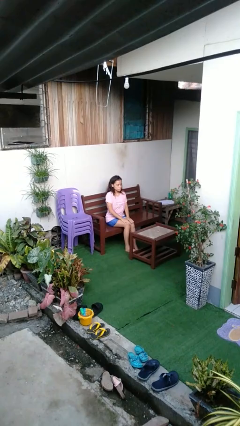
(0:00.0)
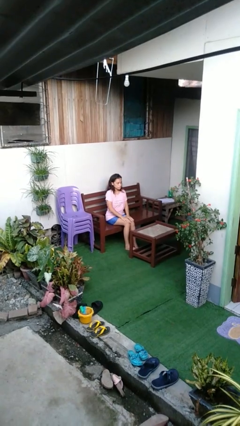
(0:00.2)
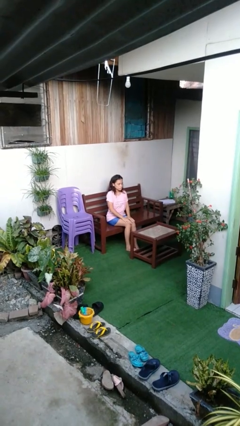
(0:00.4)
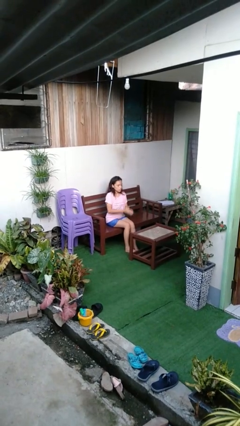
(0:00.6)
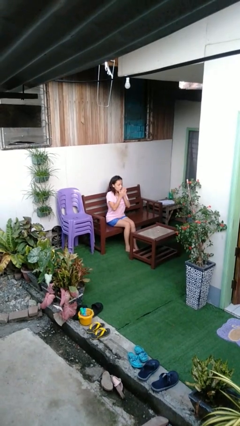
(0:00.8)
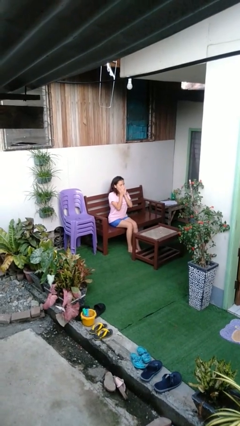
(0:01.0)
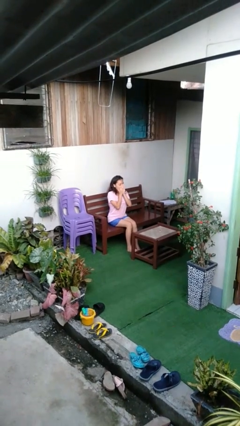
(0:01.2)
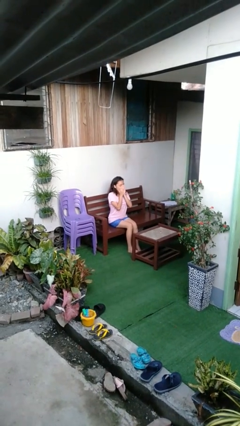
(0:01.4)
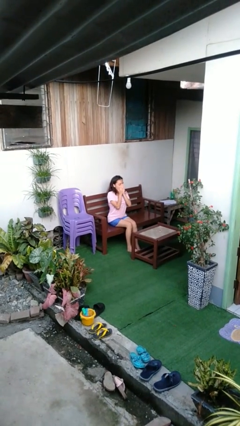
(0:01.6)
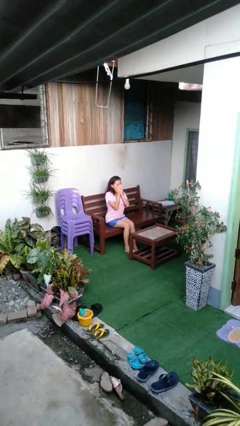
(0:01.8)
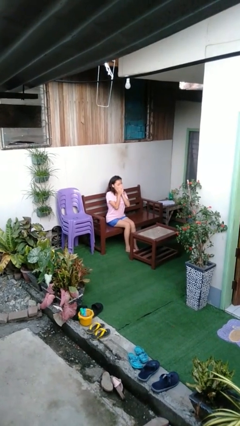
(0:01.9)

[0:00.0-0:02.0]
person yawns

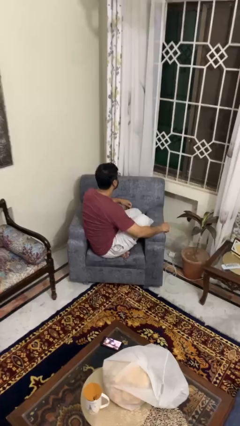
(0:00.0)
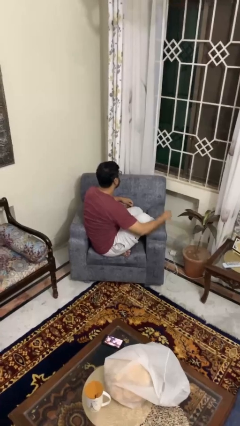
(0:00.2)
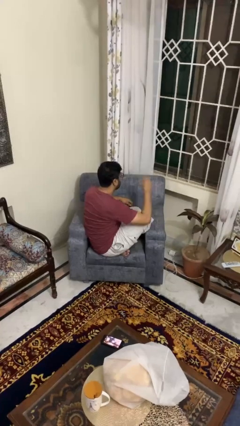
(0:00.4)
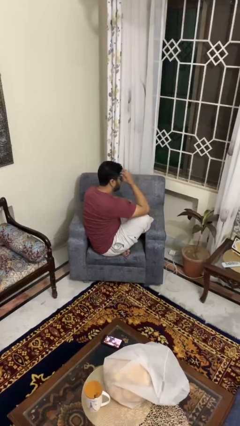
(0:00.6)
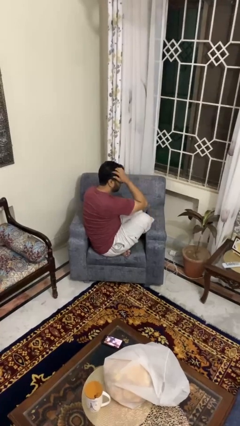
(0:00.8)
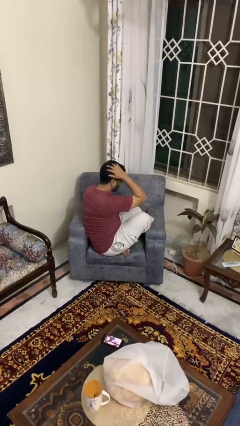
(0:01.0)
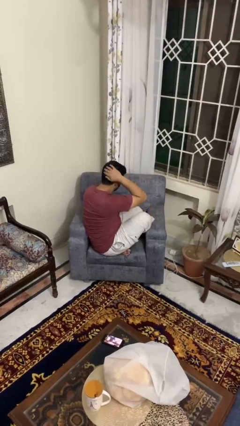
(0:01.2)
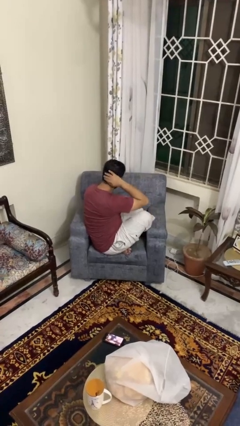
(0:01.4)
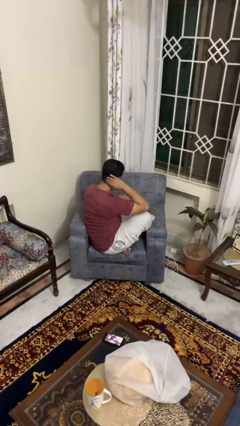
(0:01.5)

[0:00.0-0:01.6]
person strokes hair

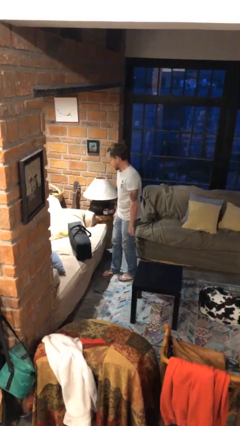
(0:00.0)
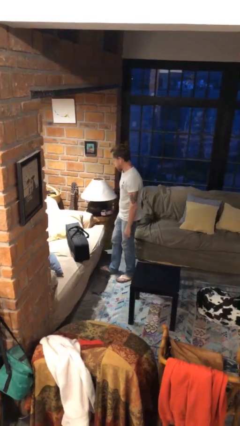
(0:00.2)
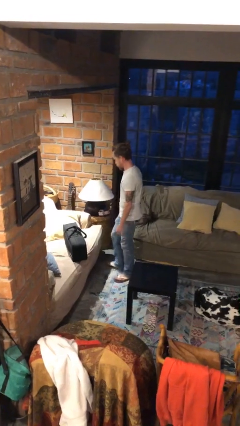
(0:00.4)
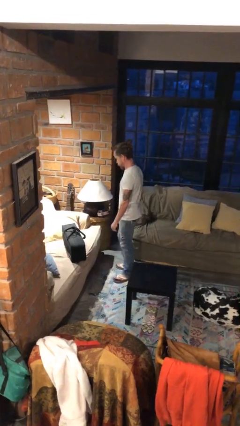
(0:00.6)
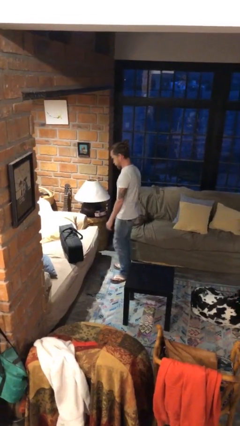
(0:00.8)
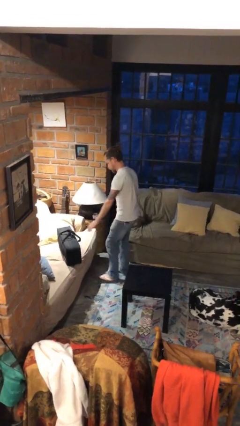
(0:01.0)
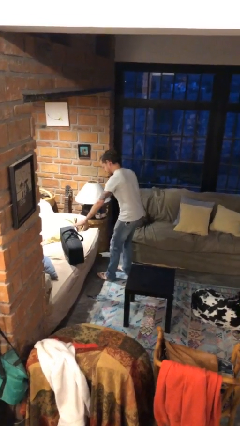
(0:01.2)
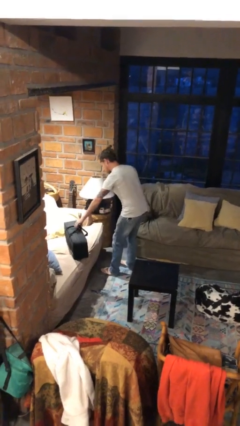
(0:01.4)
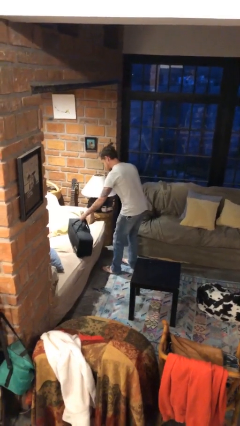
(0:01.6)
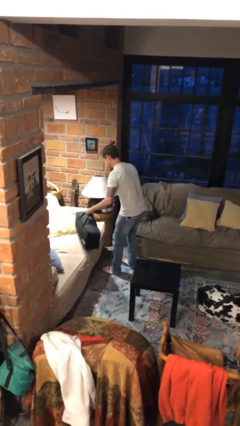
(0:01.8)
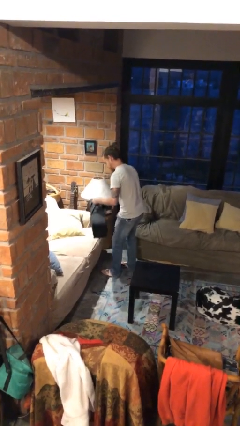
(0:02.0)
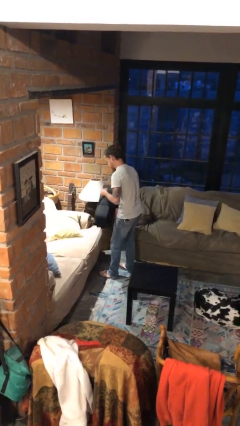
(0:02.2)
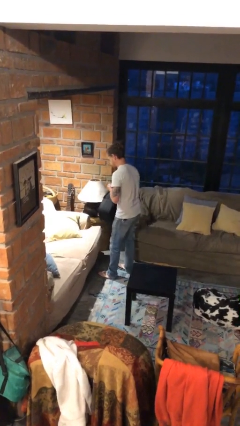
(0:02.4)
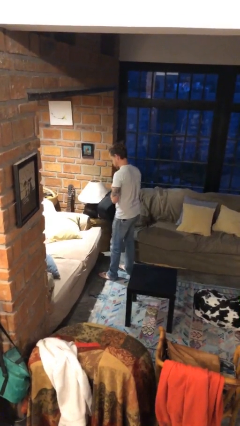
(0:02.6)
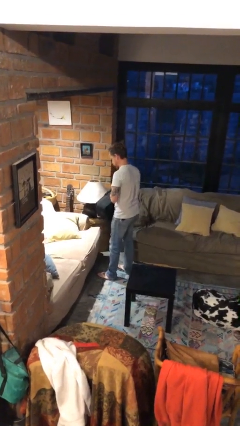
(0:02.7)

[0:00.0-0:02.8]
person picks up object from couch

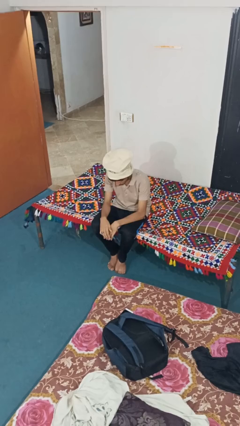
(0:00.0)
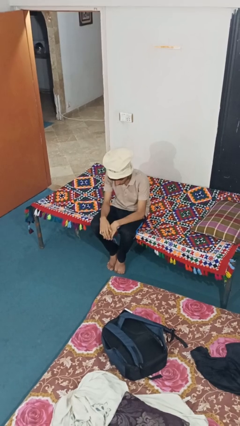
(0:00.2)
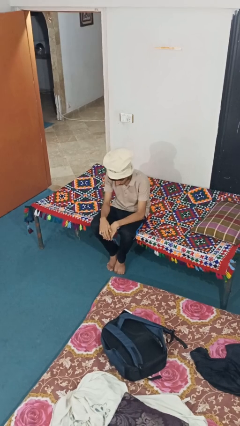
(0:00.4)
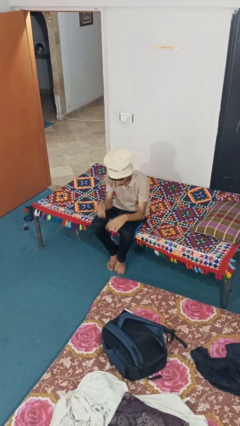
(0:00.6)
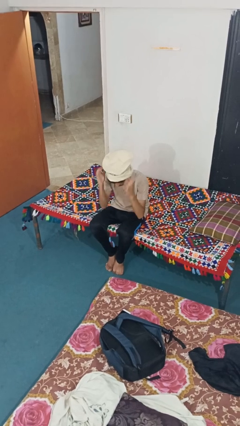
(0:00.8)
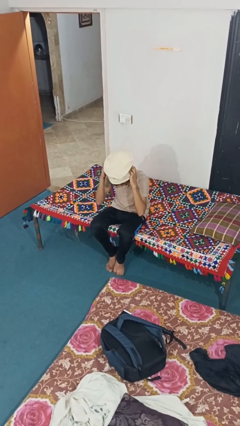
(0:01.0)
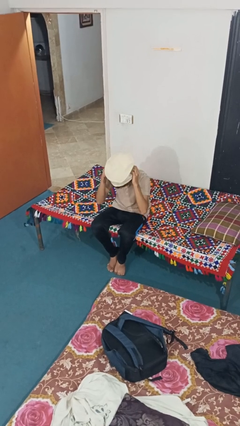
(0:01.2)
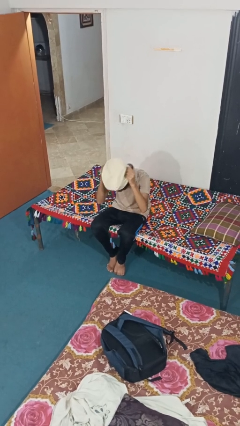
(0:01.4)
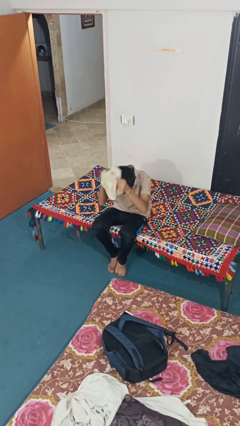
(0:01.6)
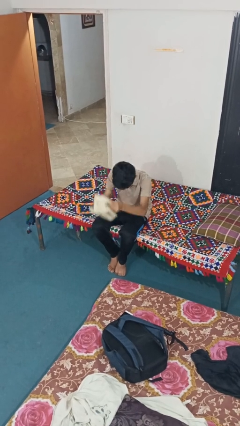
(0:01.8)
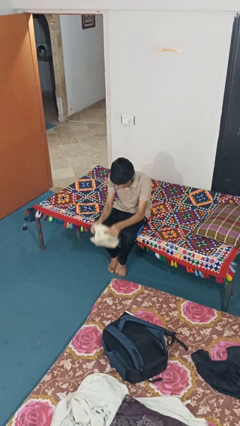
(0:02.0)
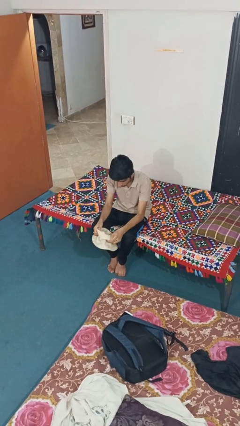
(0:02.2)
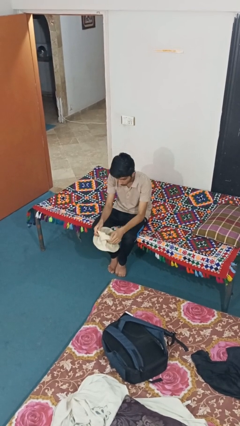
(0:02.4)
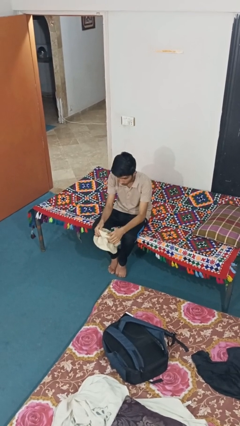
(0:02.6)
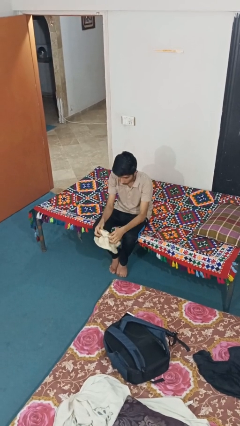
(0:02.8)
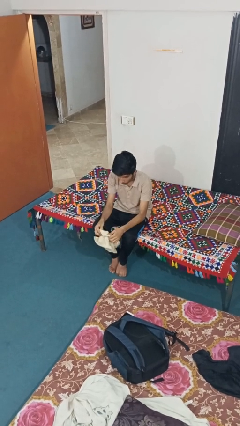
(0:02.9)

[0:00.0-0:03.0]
person takes off hat

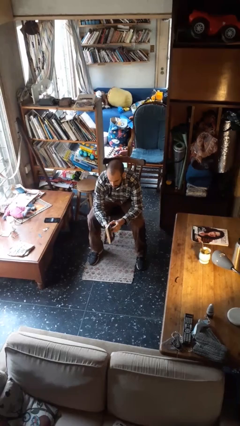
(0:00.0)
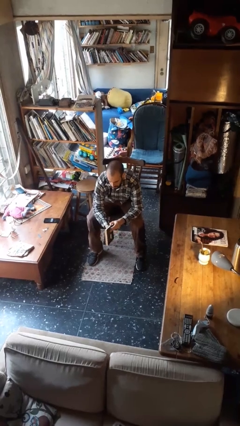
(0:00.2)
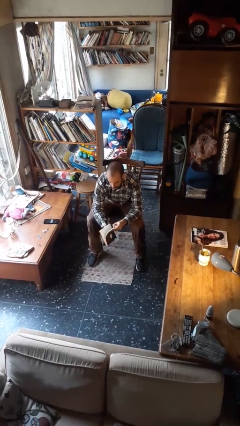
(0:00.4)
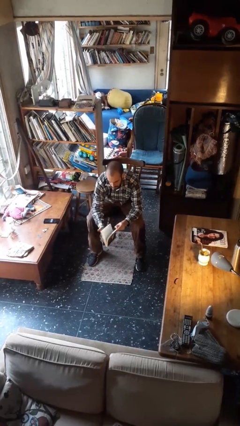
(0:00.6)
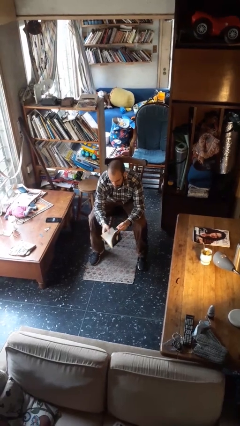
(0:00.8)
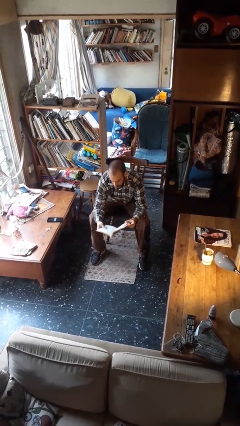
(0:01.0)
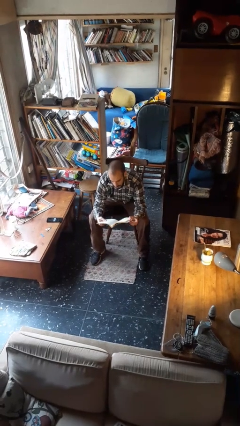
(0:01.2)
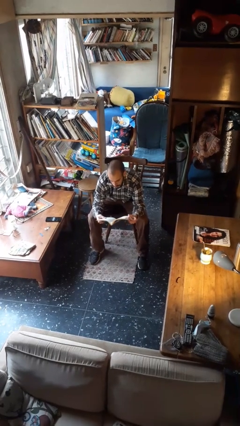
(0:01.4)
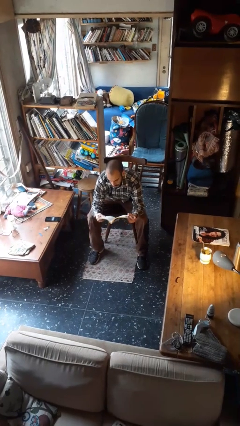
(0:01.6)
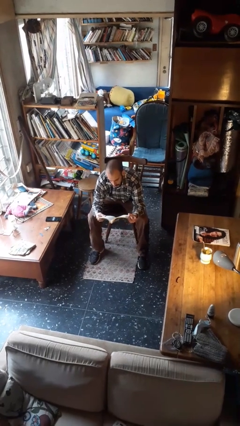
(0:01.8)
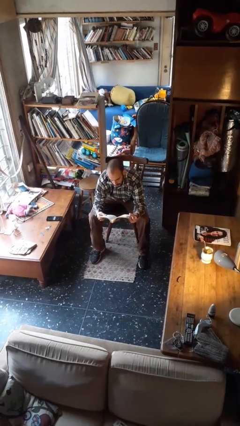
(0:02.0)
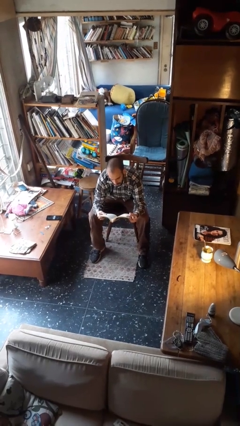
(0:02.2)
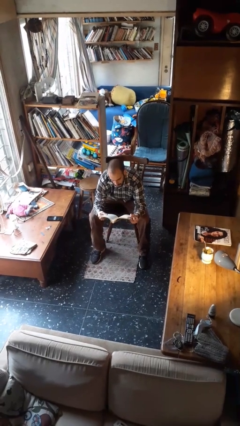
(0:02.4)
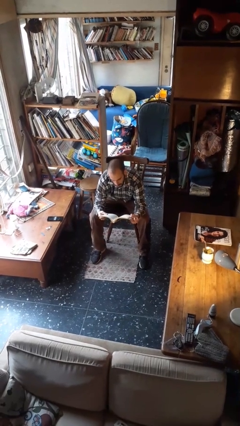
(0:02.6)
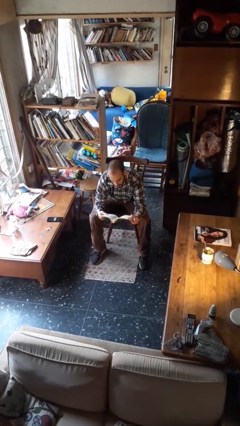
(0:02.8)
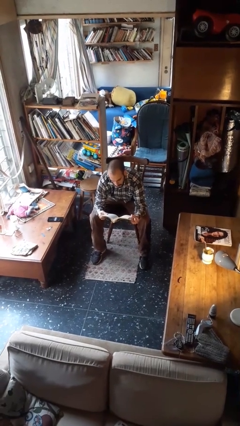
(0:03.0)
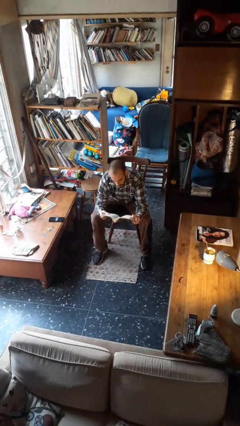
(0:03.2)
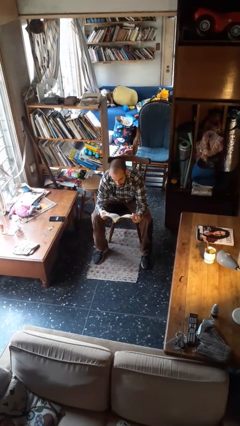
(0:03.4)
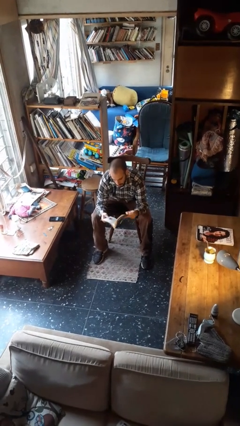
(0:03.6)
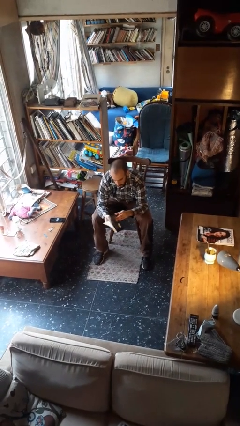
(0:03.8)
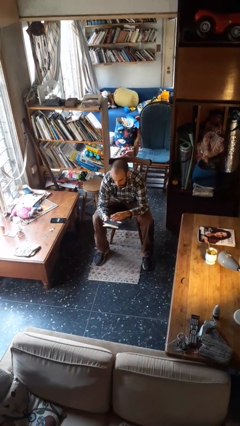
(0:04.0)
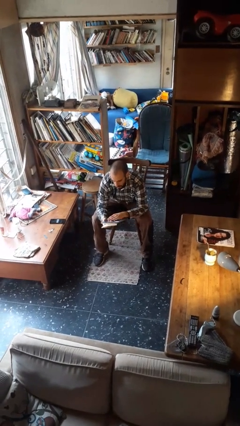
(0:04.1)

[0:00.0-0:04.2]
person reads book

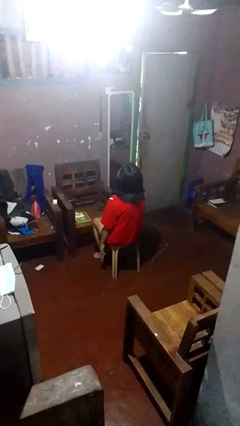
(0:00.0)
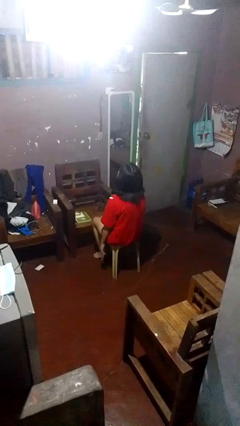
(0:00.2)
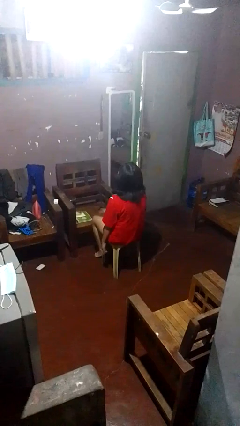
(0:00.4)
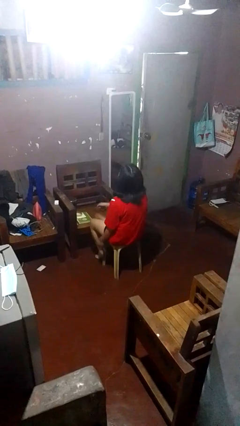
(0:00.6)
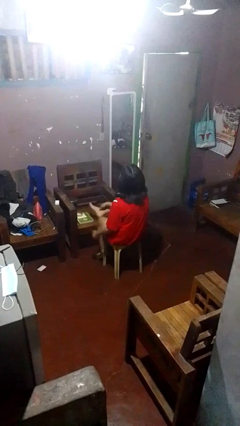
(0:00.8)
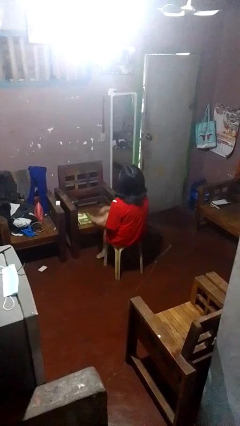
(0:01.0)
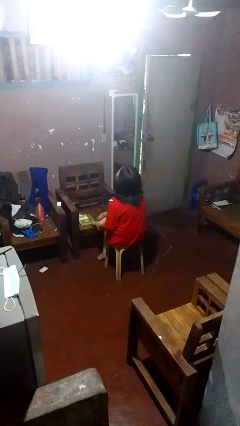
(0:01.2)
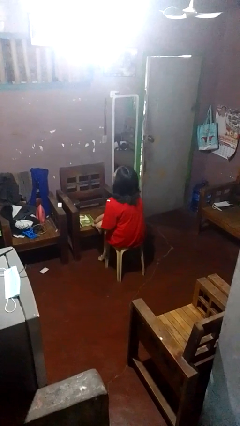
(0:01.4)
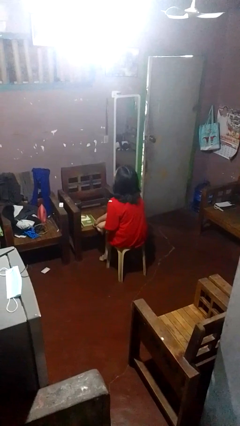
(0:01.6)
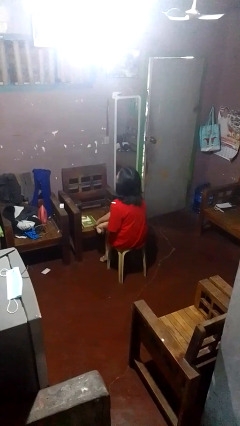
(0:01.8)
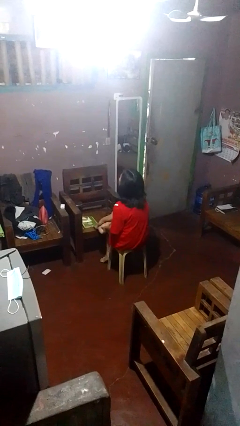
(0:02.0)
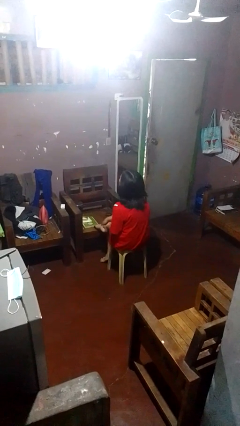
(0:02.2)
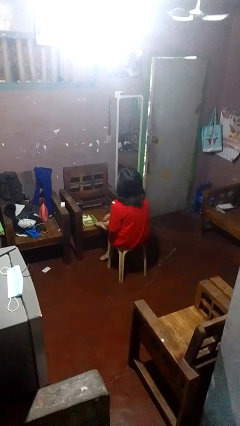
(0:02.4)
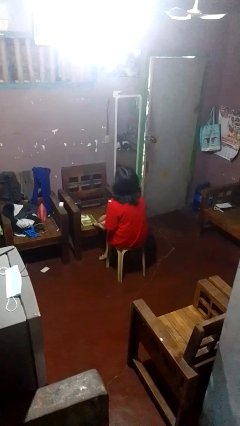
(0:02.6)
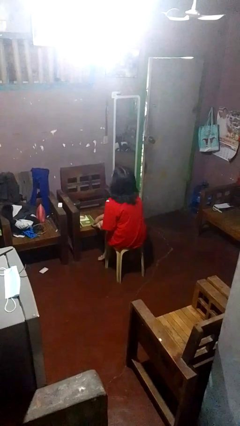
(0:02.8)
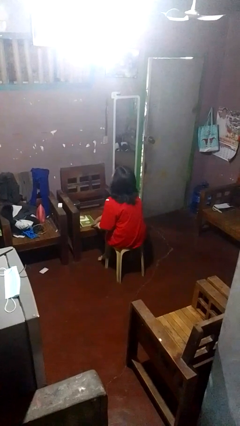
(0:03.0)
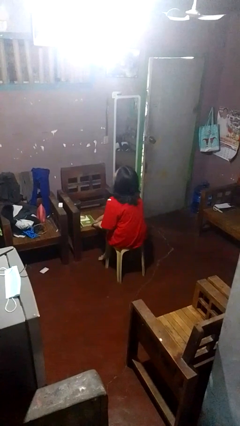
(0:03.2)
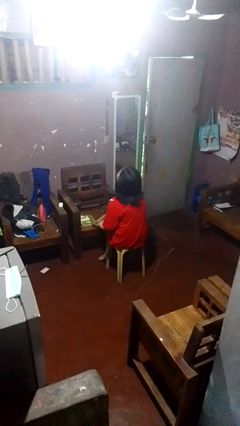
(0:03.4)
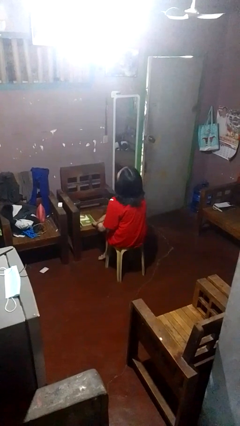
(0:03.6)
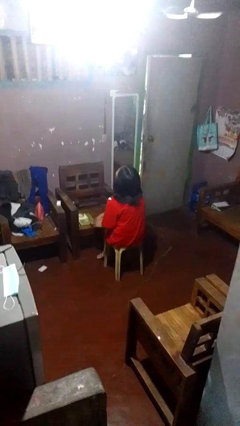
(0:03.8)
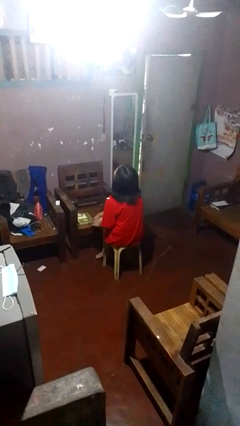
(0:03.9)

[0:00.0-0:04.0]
person rubs foot
